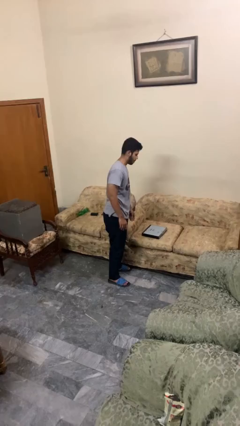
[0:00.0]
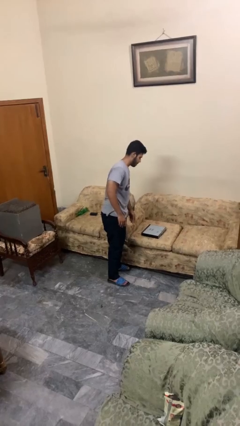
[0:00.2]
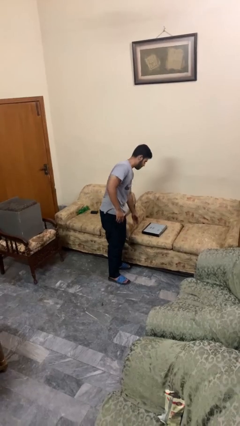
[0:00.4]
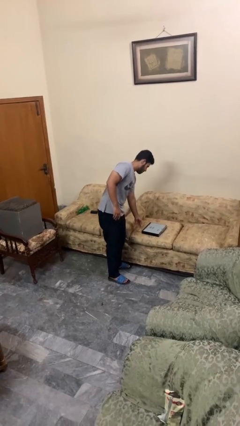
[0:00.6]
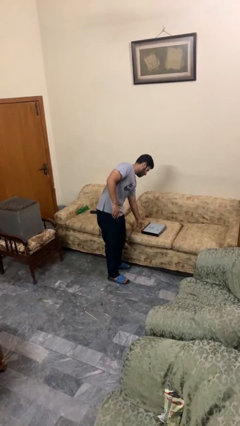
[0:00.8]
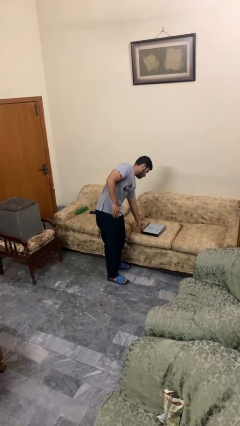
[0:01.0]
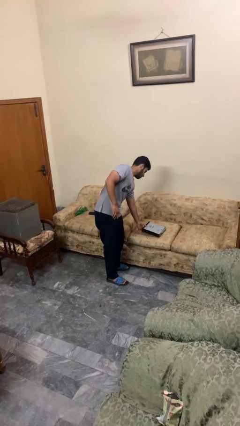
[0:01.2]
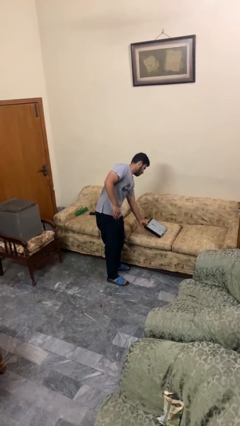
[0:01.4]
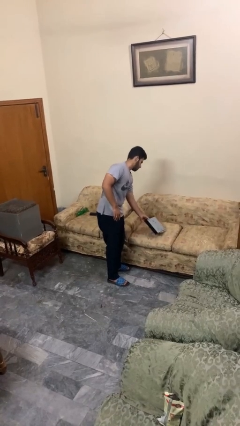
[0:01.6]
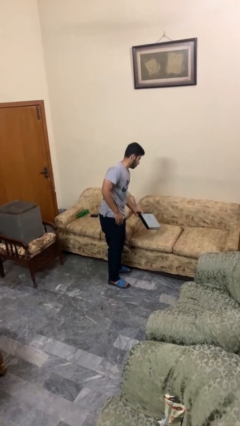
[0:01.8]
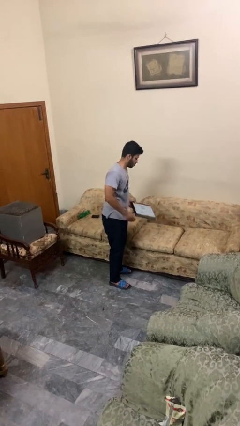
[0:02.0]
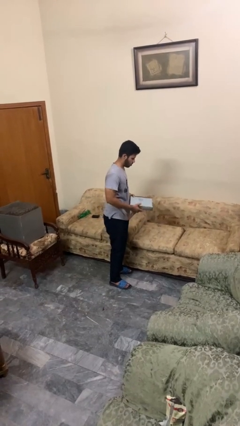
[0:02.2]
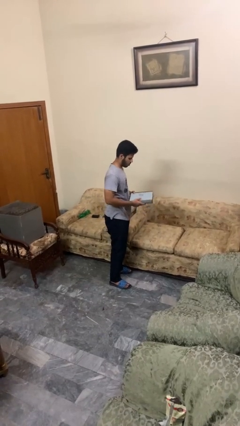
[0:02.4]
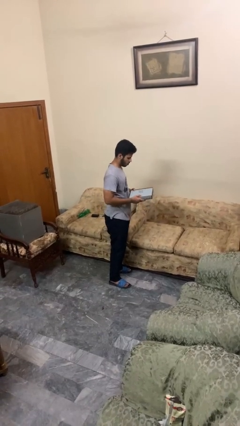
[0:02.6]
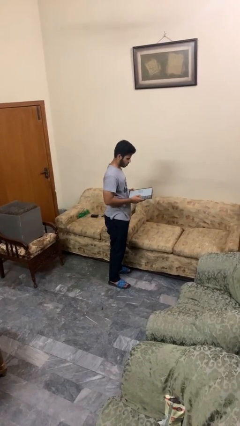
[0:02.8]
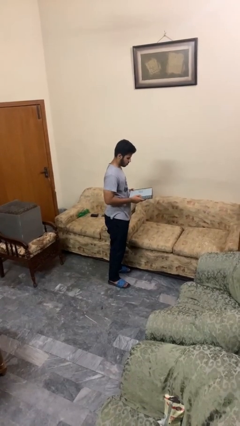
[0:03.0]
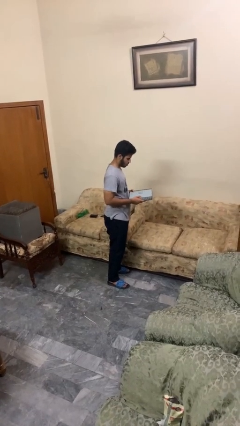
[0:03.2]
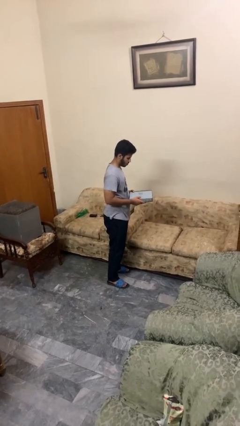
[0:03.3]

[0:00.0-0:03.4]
person picks up object from couch

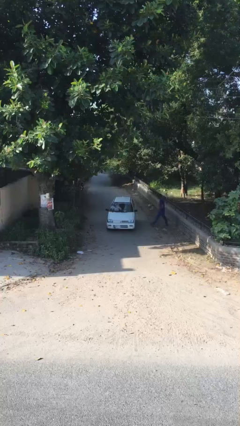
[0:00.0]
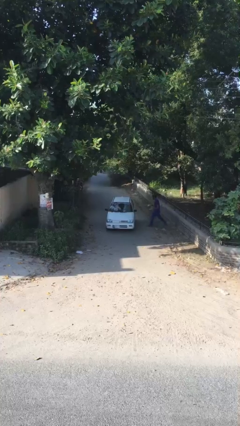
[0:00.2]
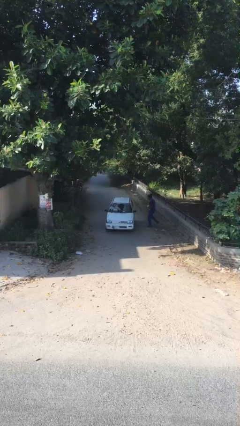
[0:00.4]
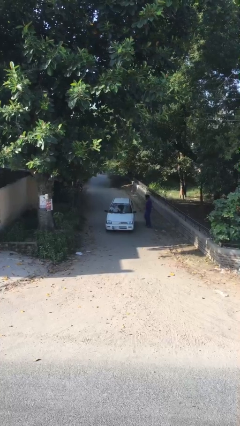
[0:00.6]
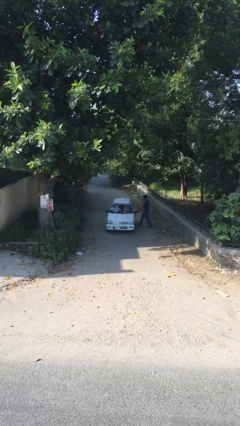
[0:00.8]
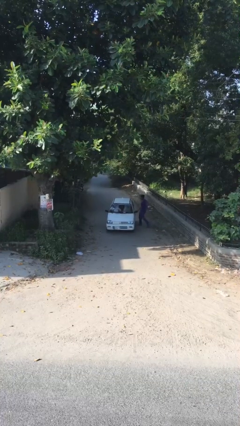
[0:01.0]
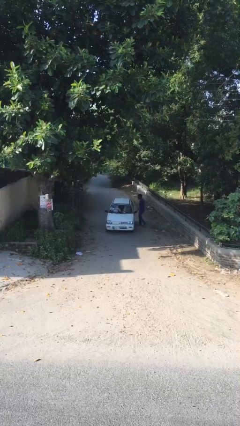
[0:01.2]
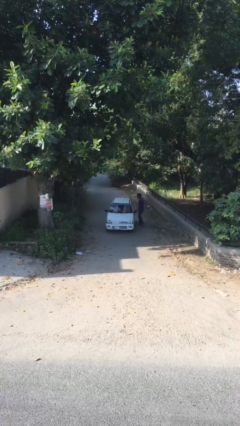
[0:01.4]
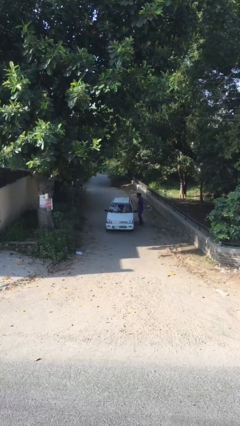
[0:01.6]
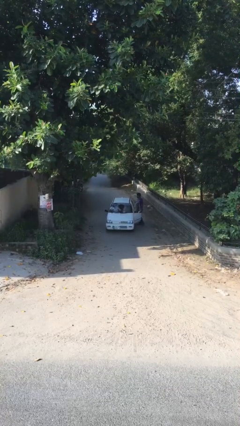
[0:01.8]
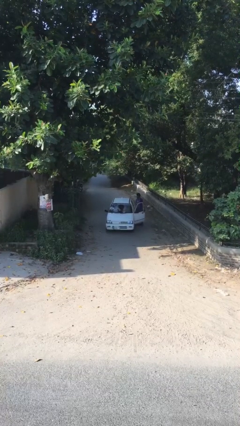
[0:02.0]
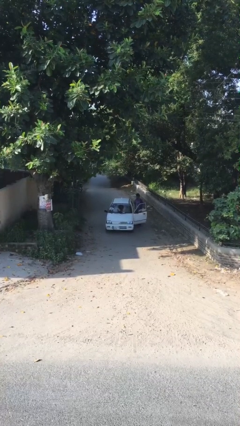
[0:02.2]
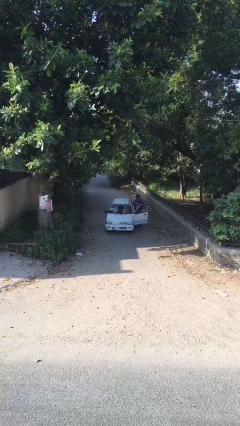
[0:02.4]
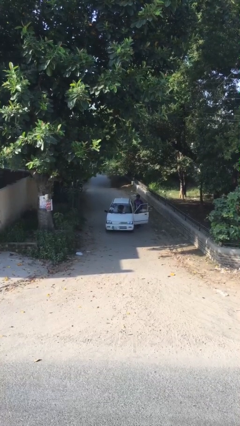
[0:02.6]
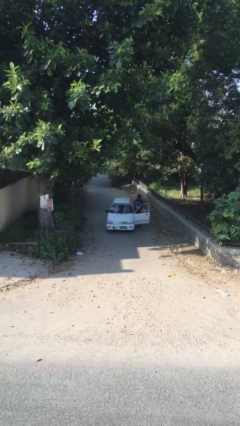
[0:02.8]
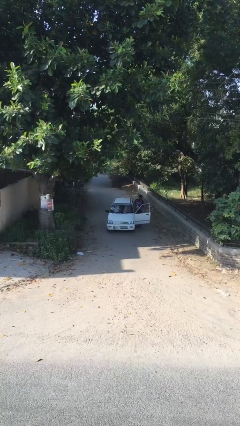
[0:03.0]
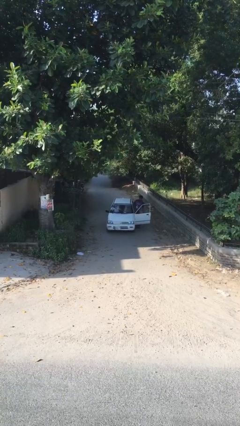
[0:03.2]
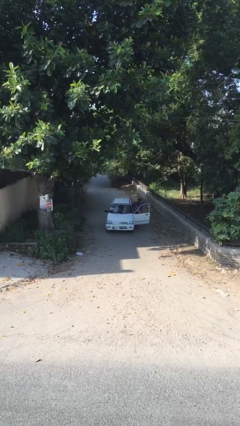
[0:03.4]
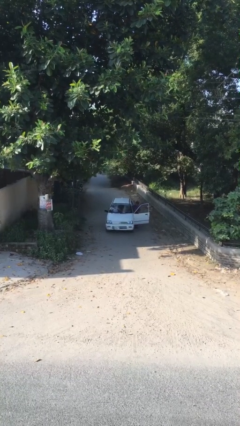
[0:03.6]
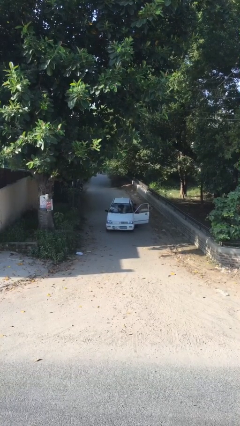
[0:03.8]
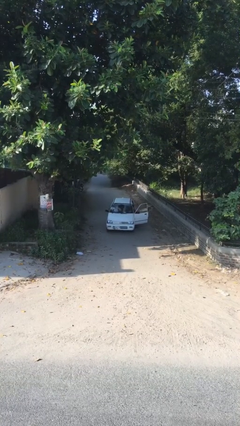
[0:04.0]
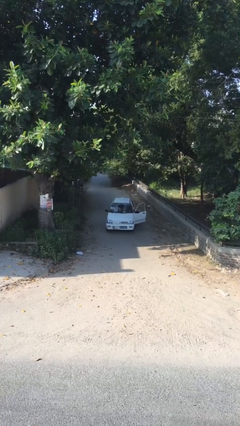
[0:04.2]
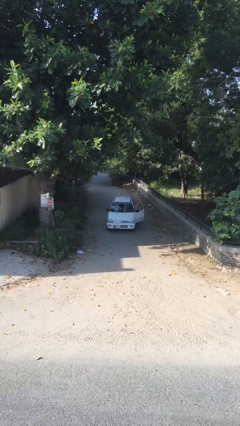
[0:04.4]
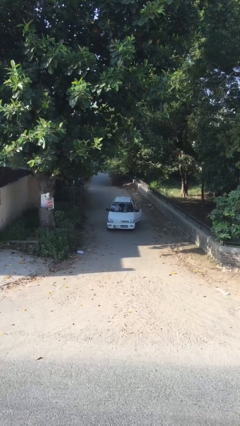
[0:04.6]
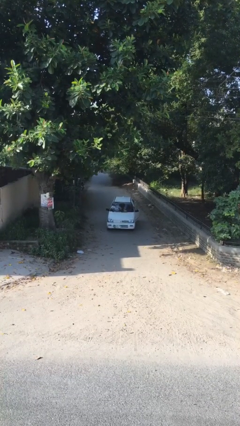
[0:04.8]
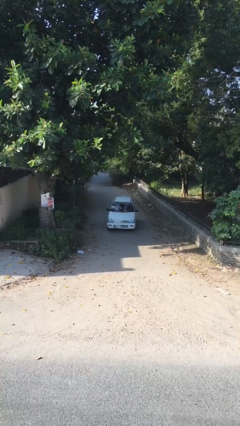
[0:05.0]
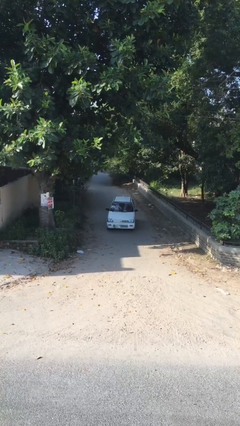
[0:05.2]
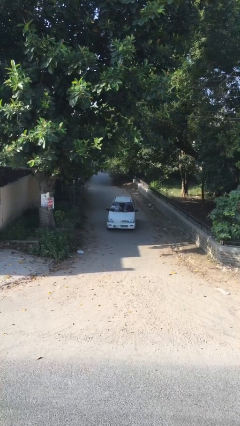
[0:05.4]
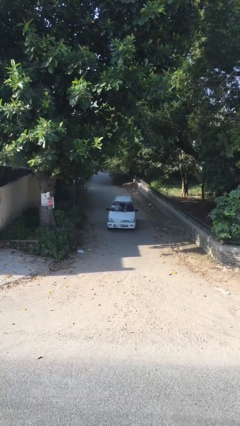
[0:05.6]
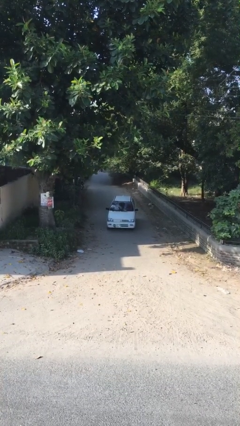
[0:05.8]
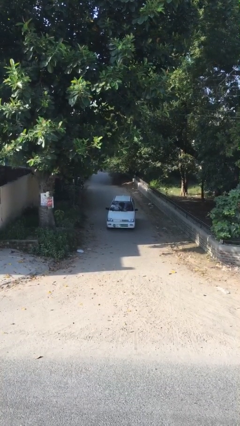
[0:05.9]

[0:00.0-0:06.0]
car picks up person

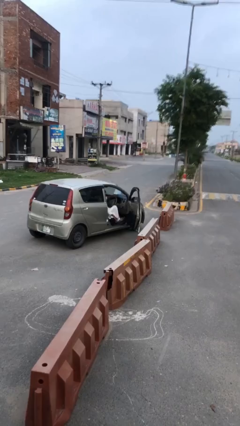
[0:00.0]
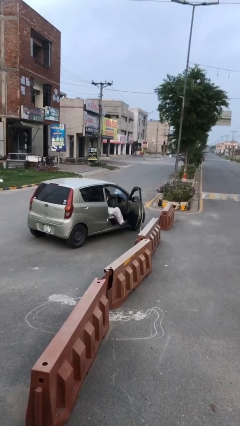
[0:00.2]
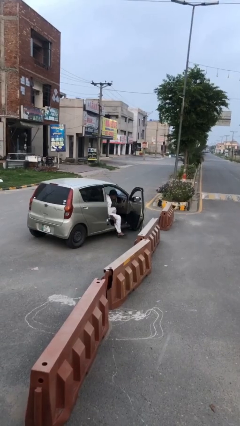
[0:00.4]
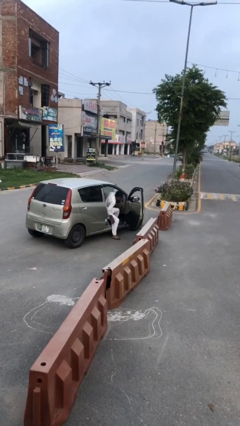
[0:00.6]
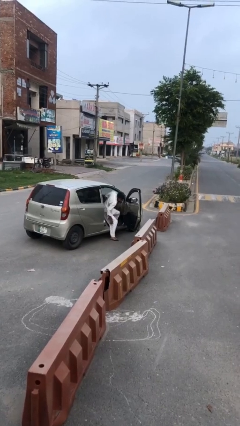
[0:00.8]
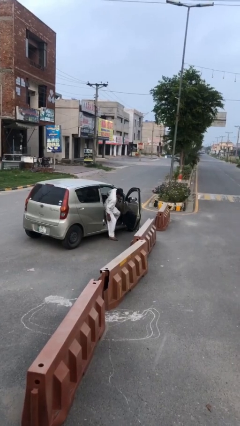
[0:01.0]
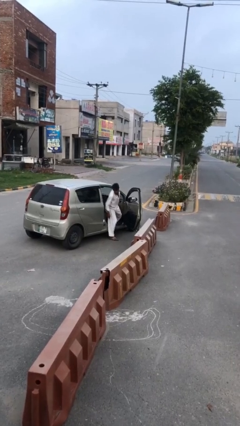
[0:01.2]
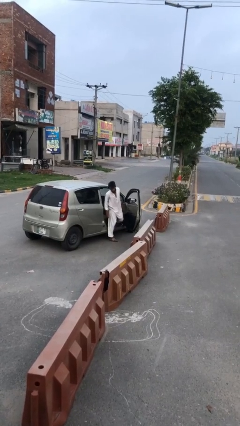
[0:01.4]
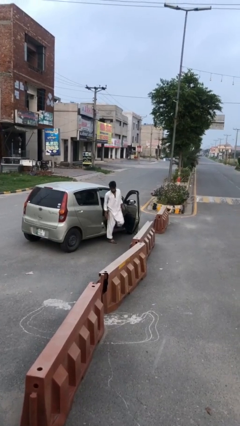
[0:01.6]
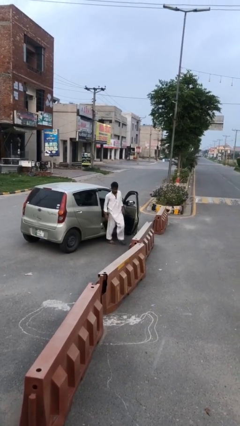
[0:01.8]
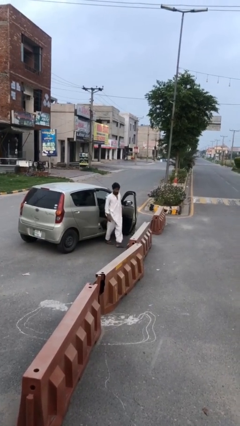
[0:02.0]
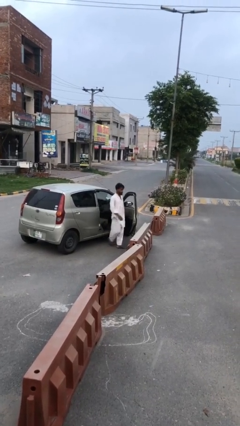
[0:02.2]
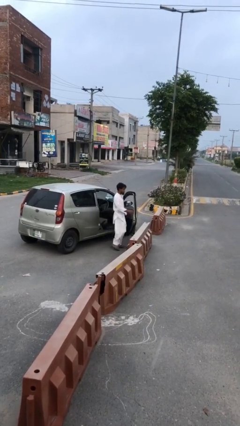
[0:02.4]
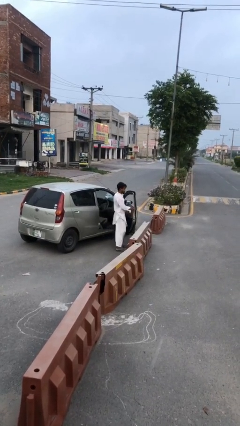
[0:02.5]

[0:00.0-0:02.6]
person exits car

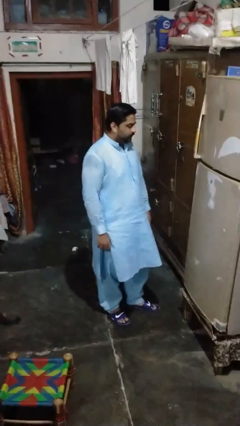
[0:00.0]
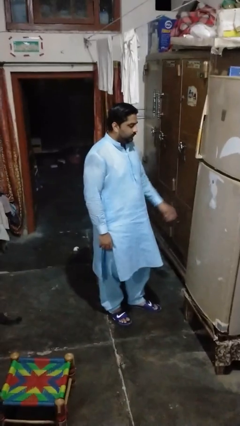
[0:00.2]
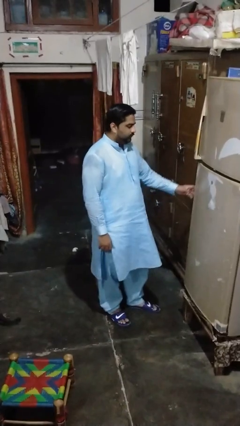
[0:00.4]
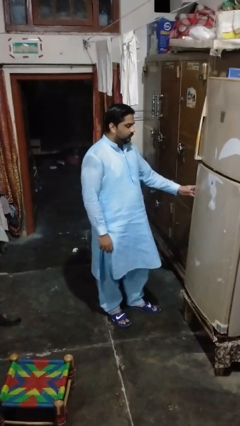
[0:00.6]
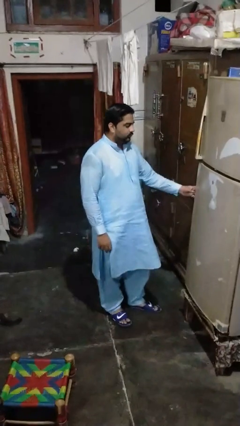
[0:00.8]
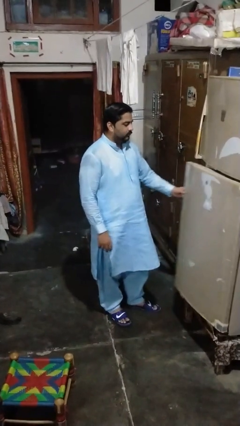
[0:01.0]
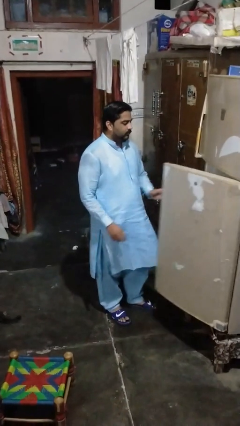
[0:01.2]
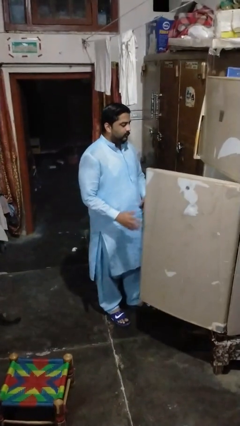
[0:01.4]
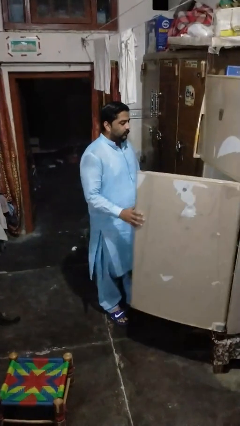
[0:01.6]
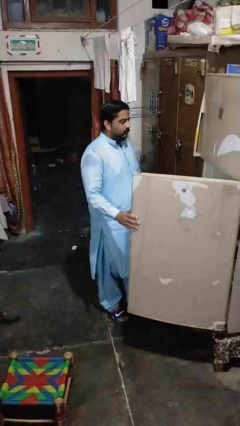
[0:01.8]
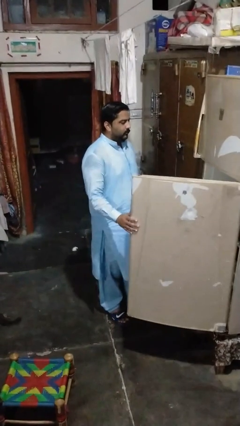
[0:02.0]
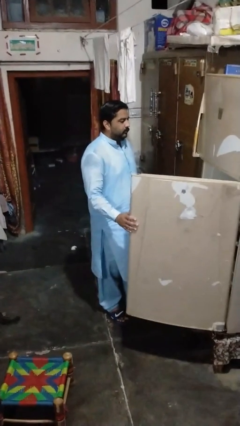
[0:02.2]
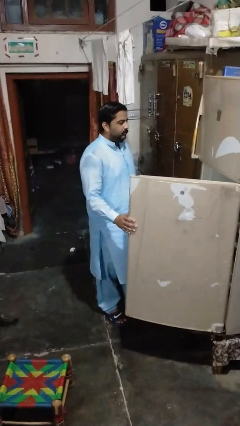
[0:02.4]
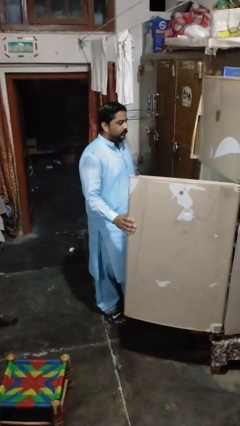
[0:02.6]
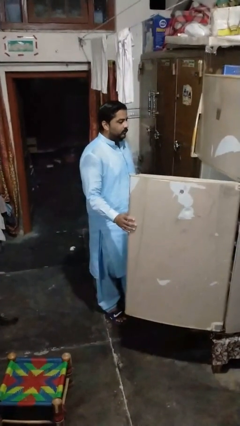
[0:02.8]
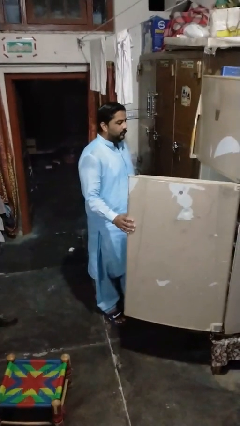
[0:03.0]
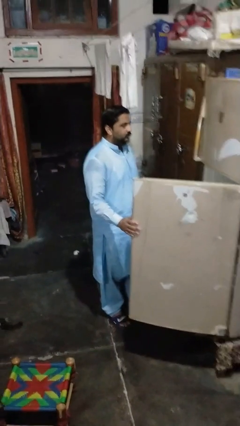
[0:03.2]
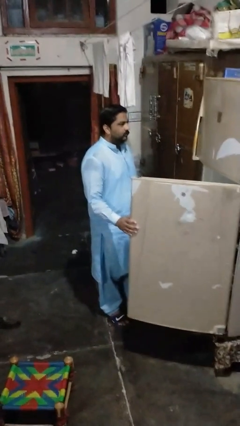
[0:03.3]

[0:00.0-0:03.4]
person opens refrigerator

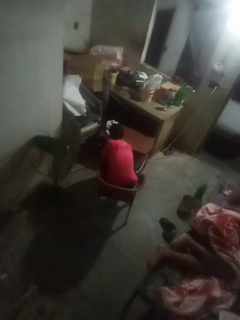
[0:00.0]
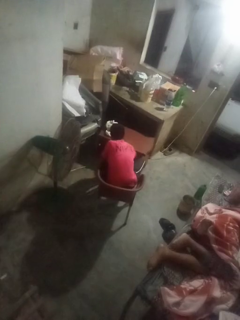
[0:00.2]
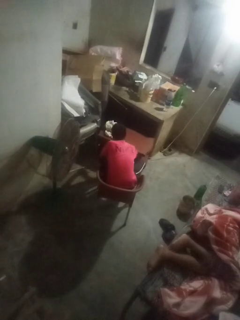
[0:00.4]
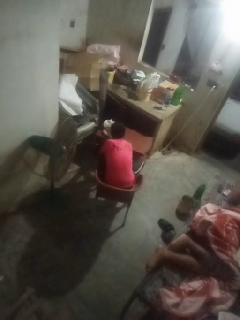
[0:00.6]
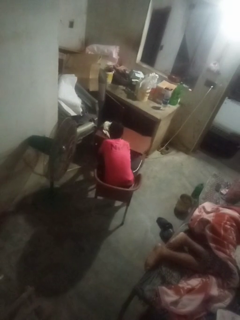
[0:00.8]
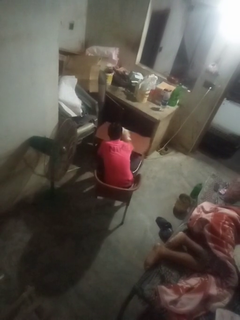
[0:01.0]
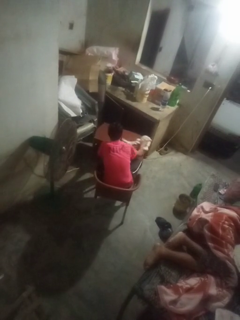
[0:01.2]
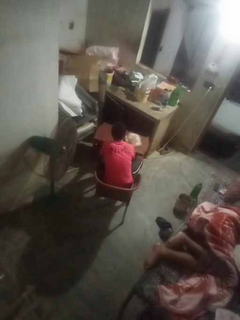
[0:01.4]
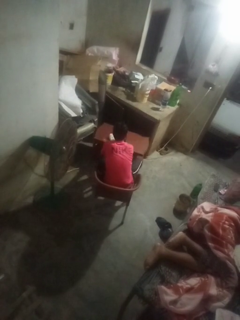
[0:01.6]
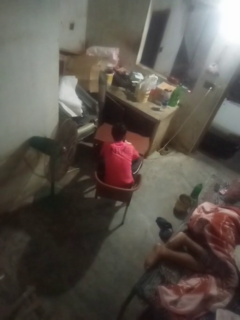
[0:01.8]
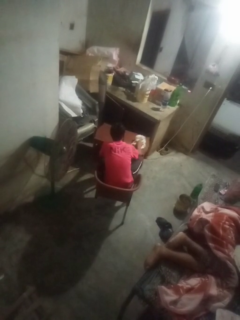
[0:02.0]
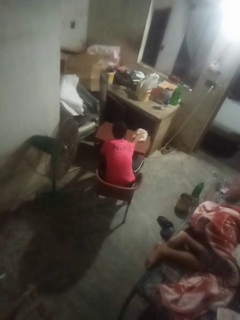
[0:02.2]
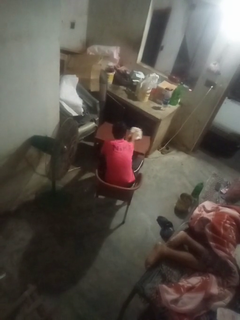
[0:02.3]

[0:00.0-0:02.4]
person cleans table with rag

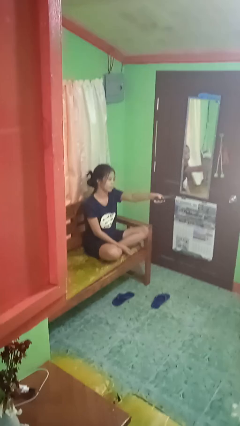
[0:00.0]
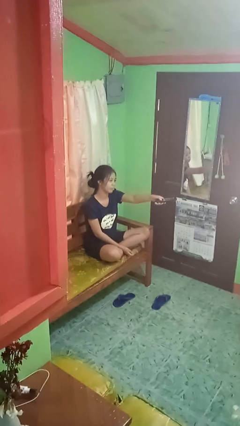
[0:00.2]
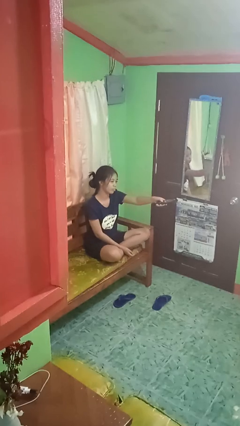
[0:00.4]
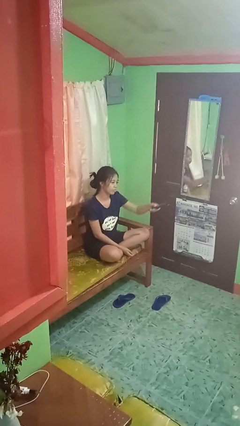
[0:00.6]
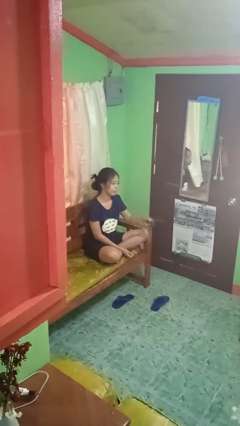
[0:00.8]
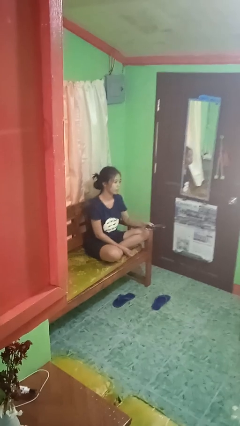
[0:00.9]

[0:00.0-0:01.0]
person uses television remote
